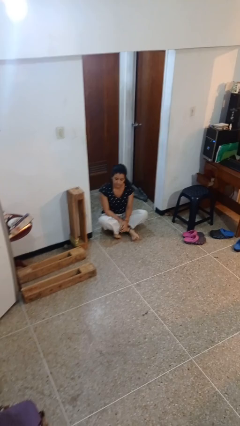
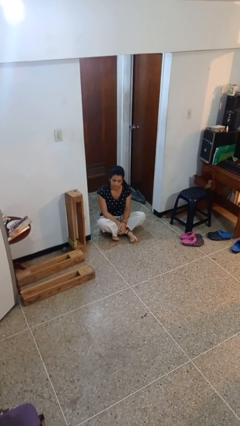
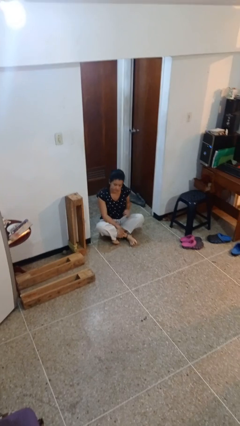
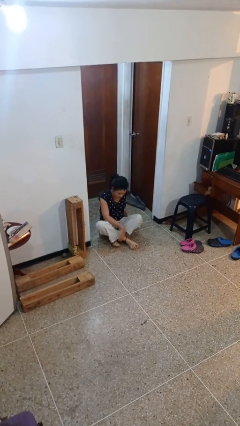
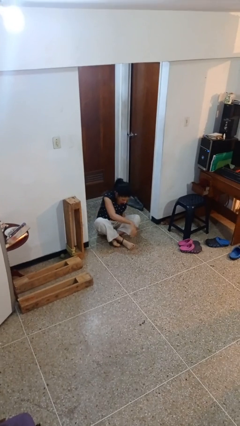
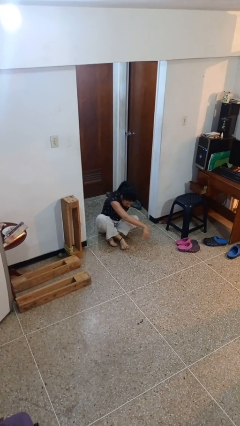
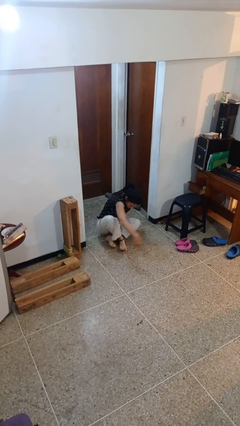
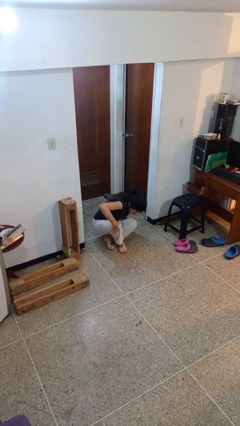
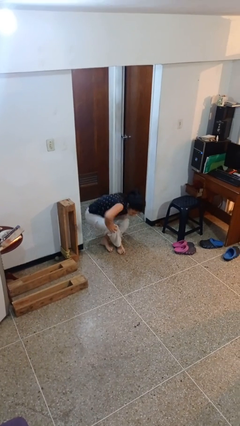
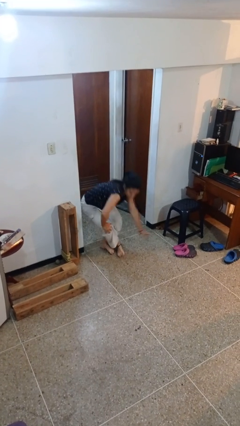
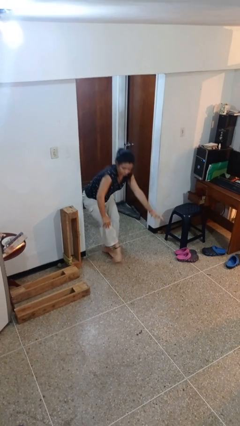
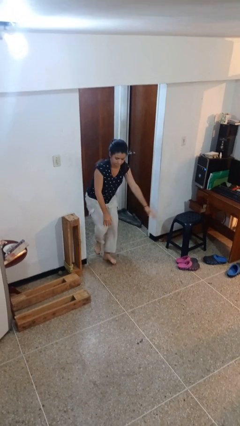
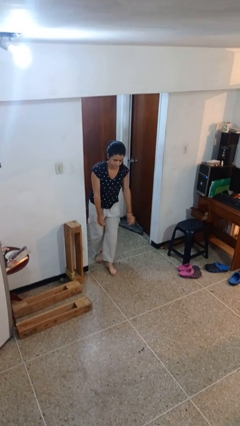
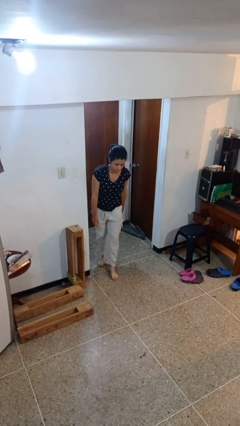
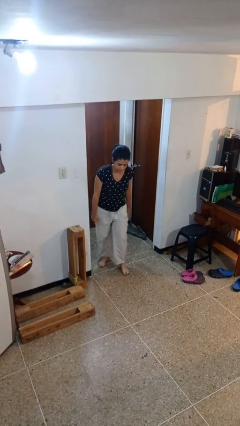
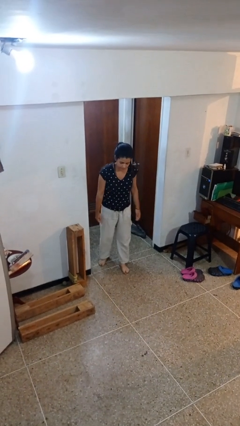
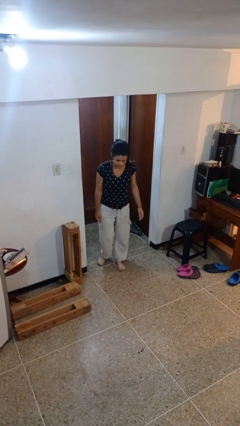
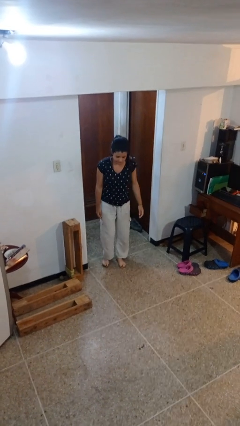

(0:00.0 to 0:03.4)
person stands up from floor

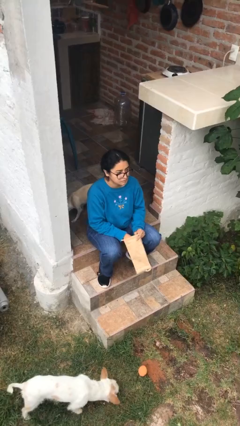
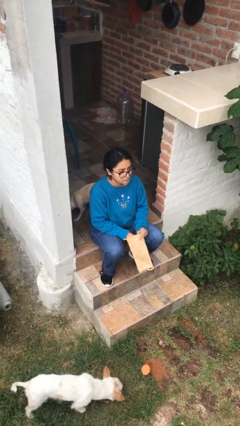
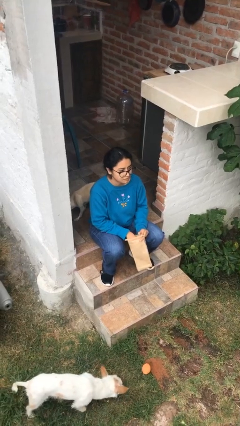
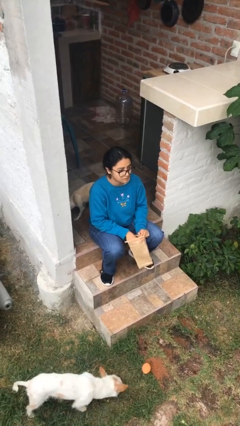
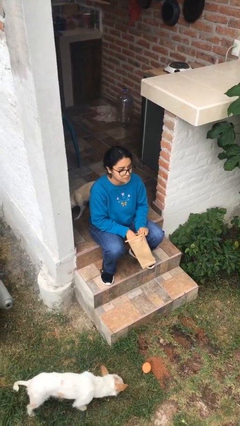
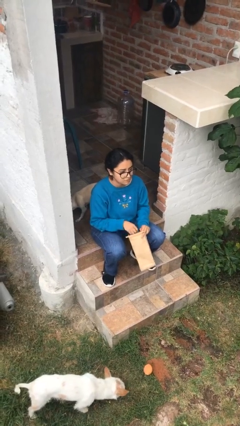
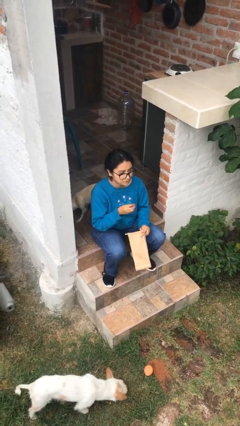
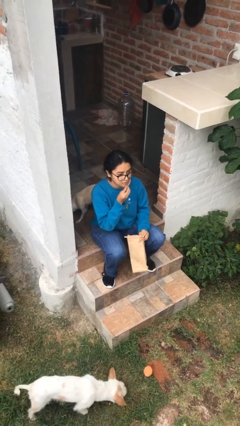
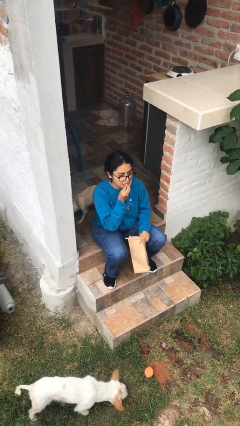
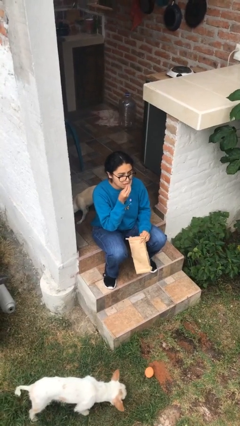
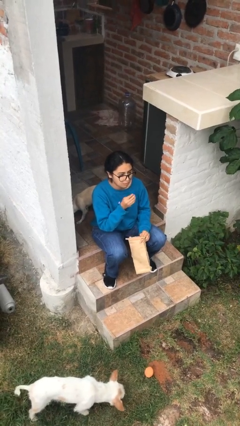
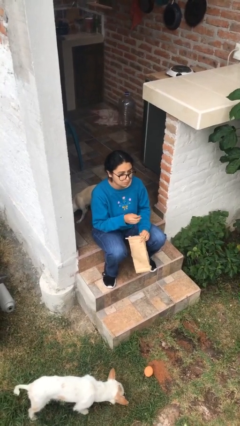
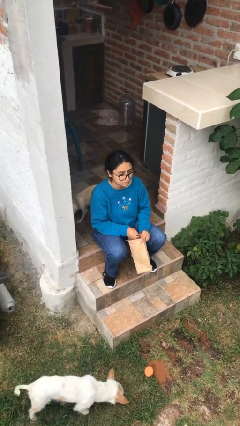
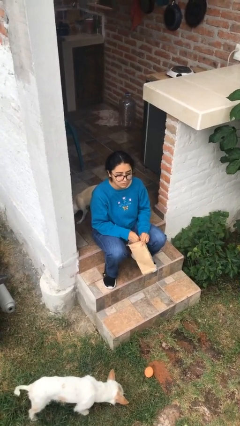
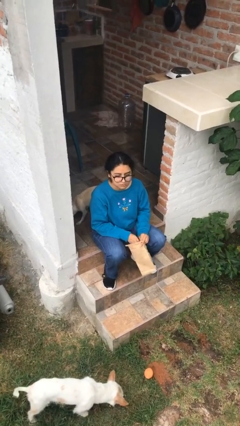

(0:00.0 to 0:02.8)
person eats snack from bag

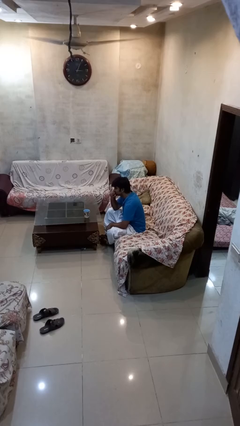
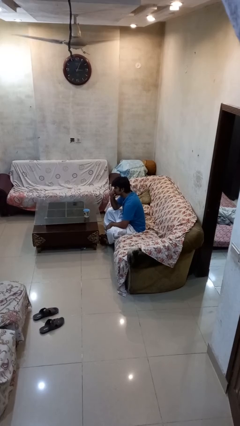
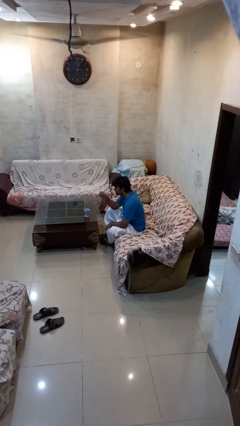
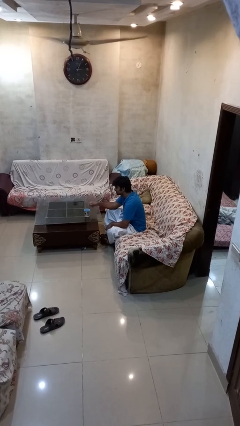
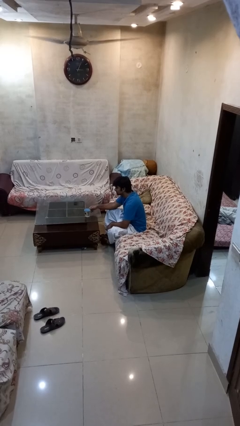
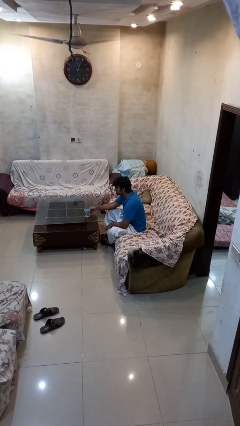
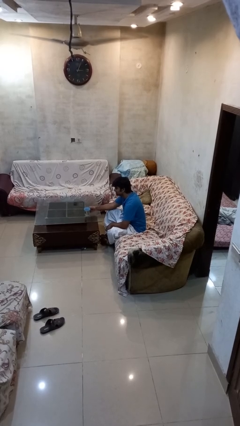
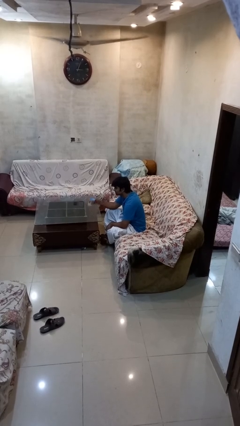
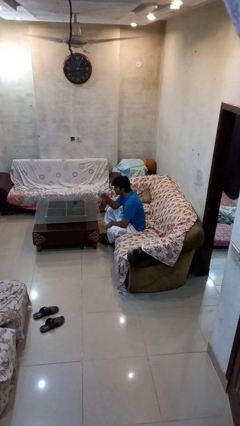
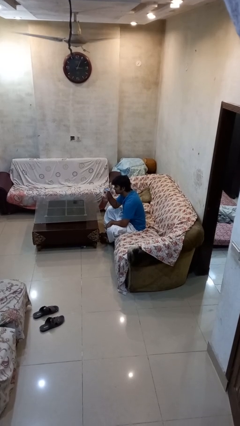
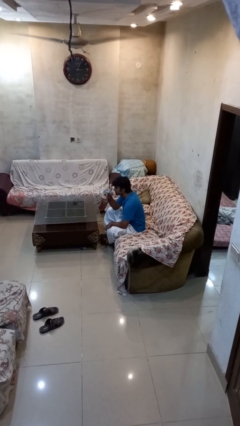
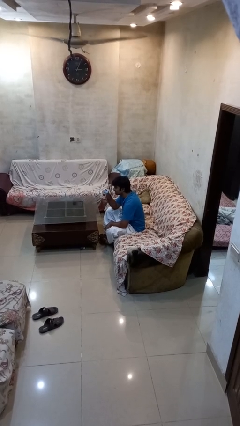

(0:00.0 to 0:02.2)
person picks up object from table

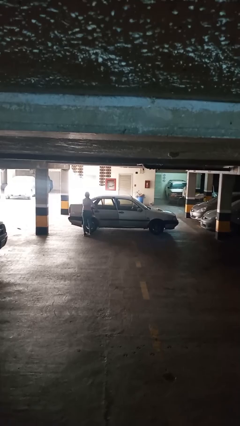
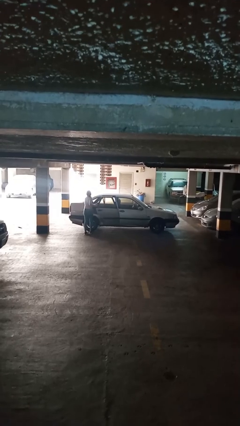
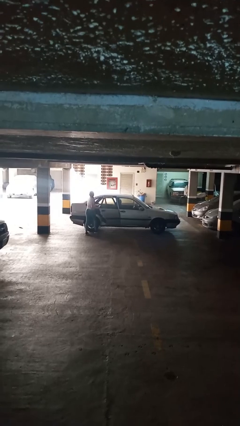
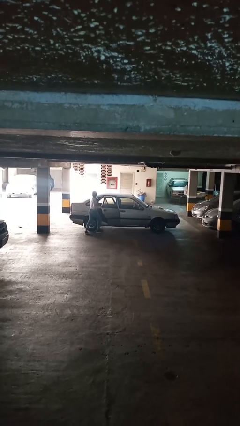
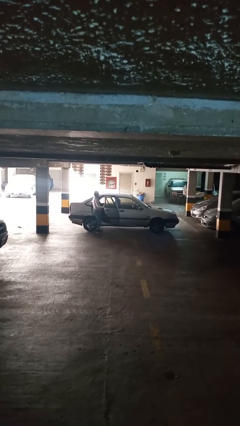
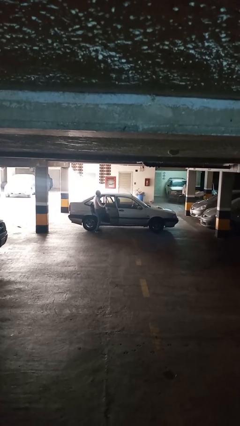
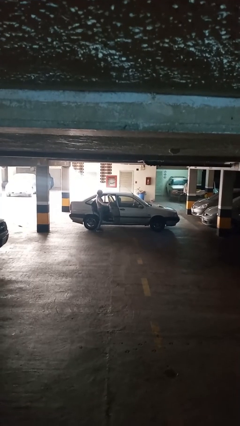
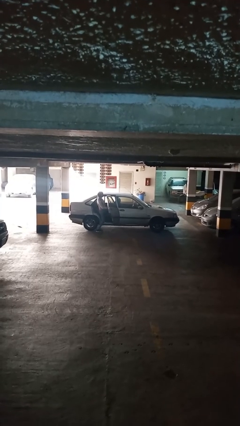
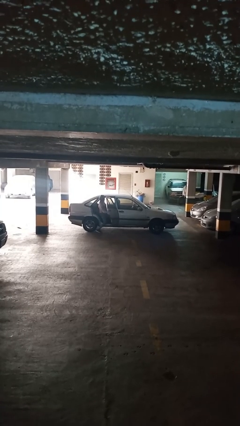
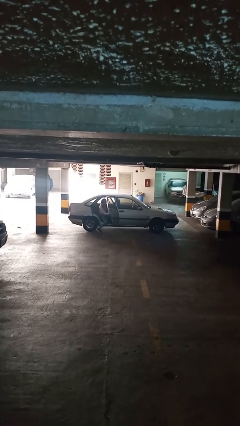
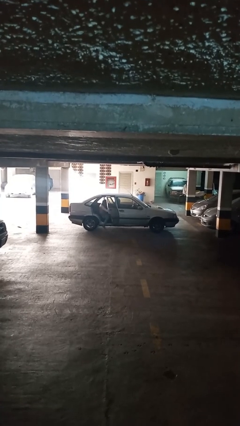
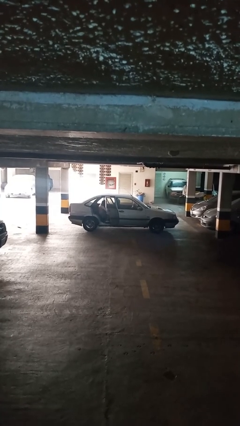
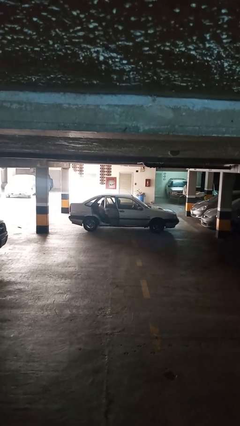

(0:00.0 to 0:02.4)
car picks up person

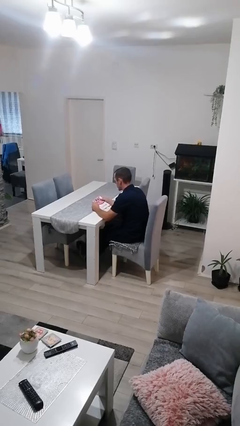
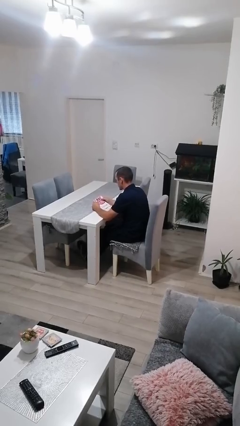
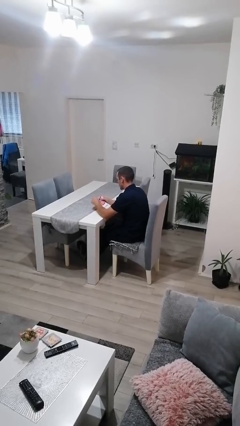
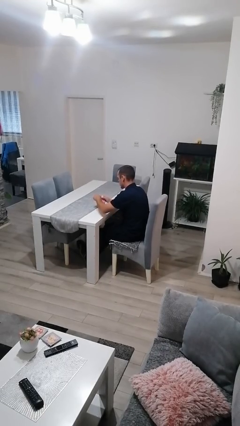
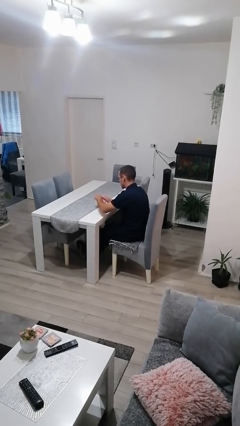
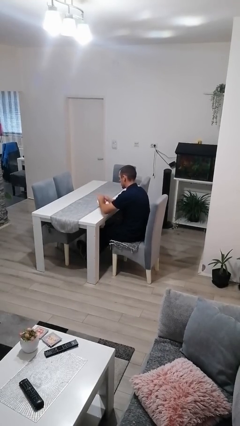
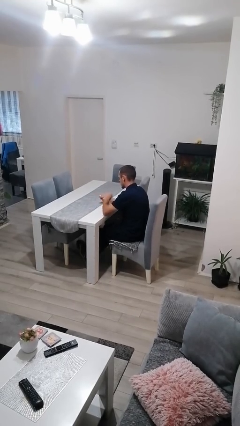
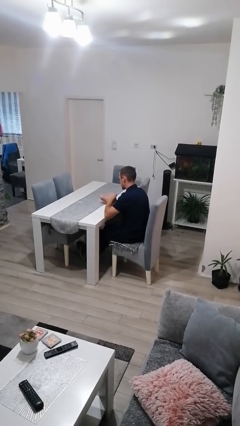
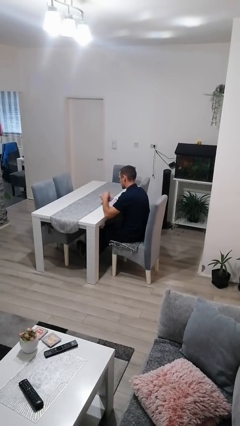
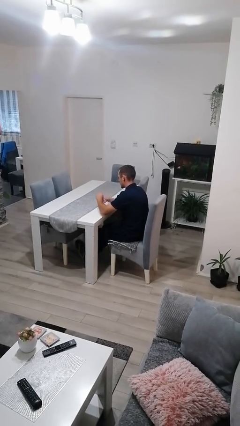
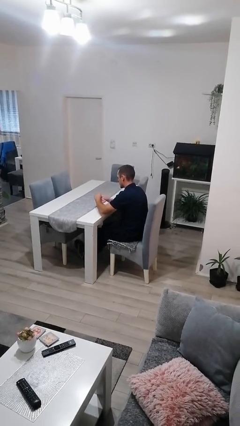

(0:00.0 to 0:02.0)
person tears paper

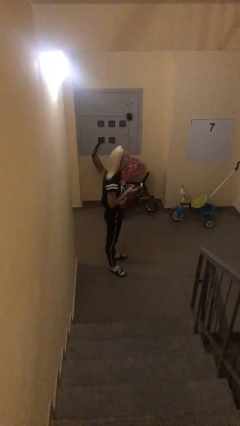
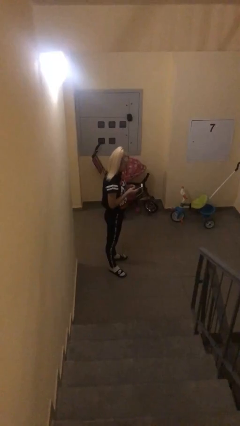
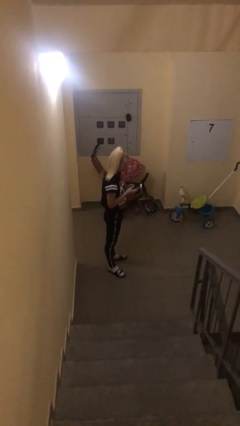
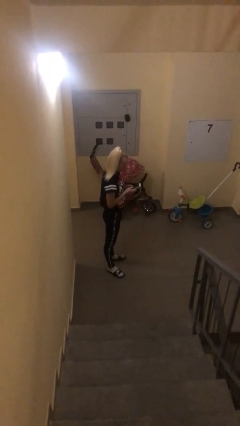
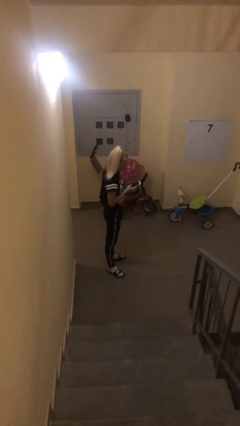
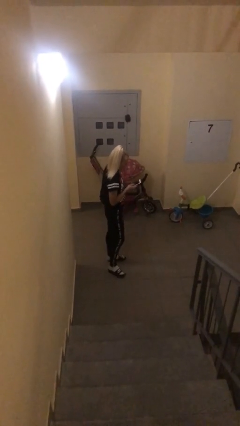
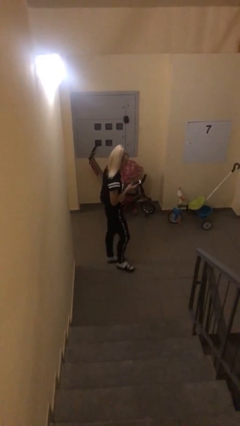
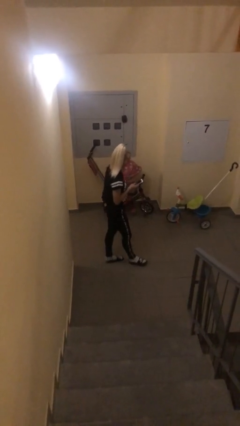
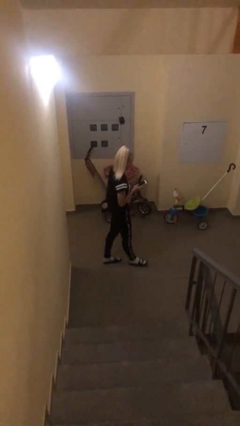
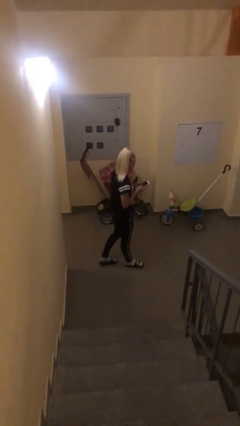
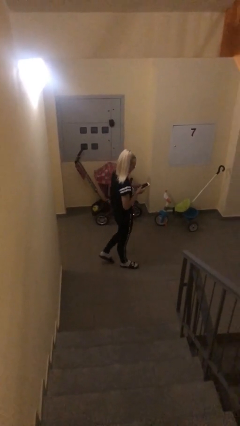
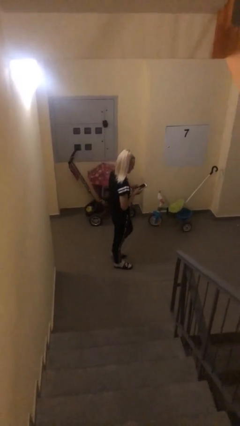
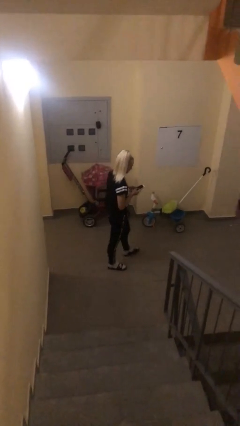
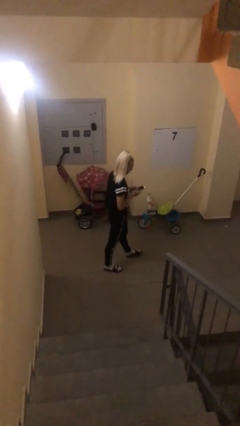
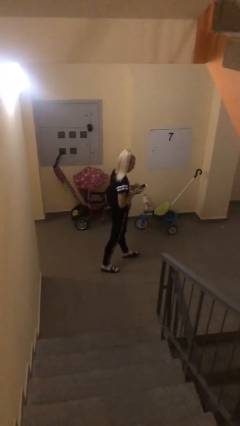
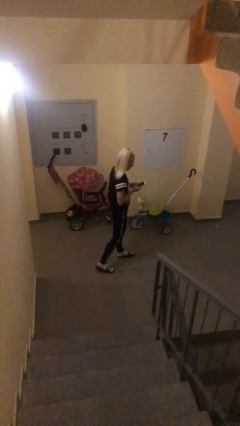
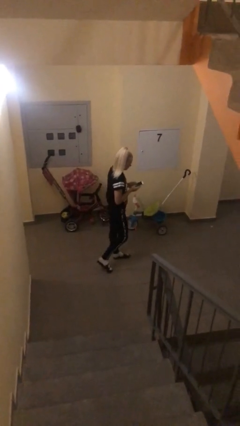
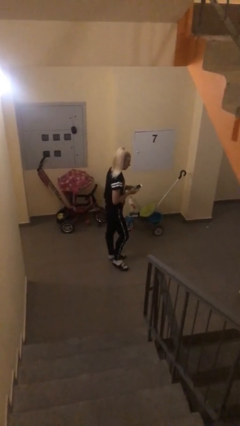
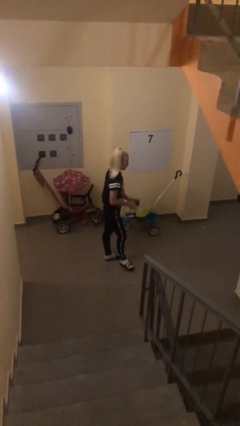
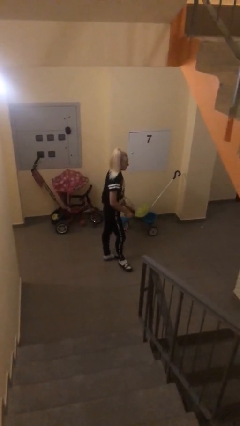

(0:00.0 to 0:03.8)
person texts on phone

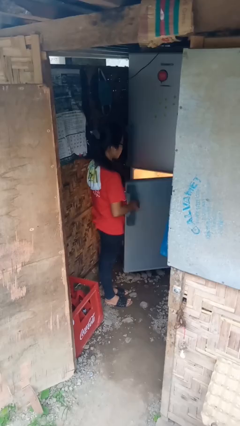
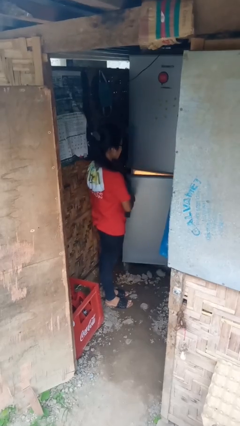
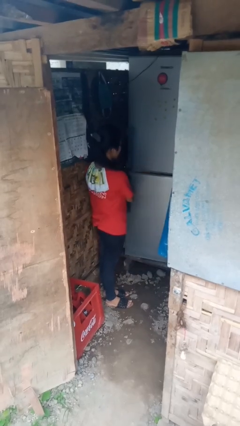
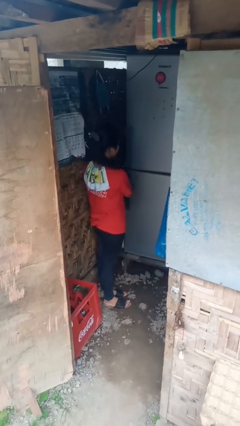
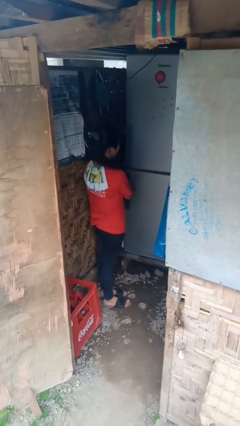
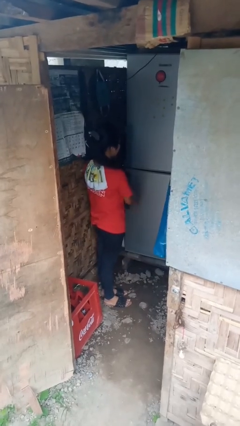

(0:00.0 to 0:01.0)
person closes refrigerator
